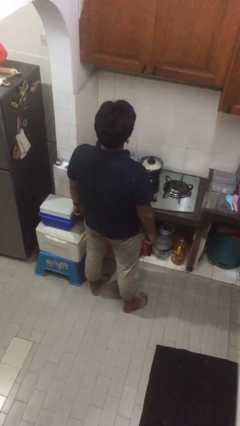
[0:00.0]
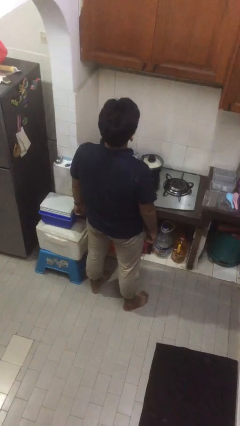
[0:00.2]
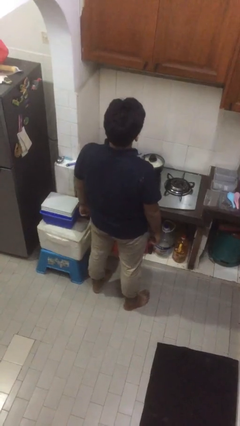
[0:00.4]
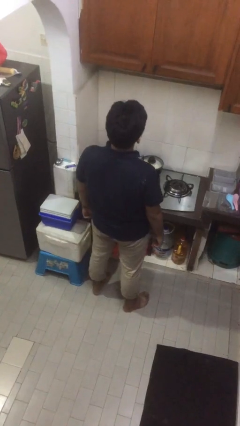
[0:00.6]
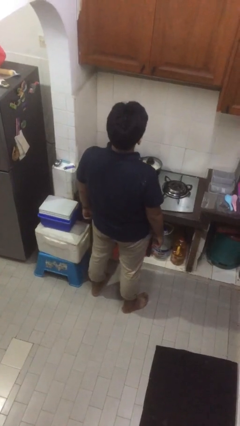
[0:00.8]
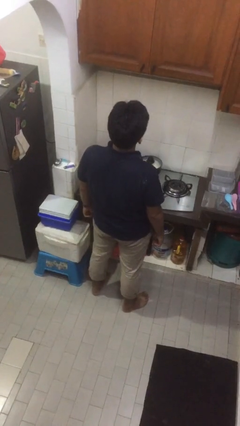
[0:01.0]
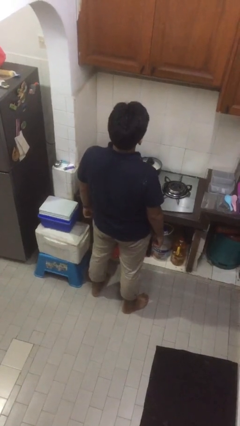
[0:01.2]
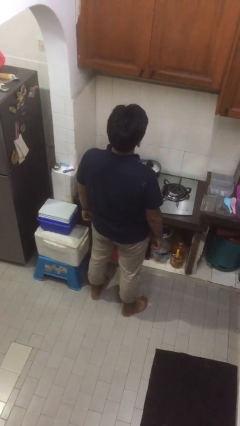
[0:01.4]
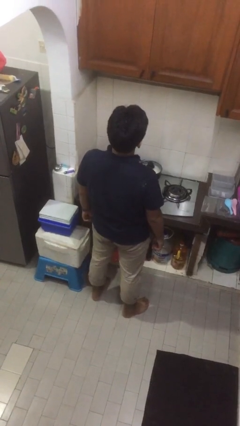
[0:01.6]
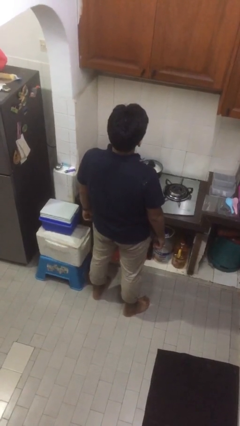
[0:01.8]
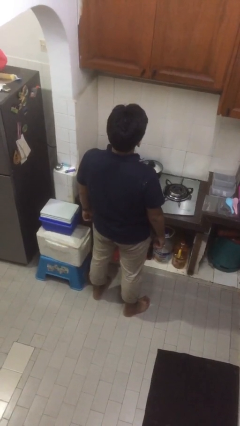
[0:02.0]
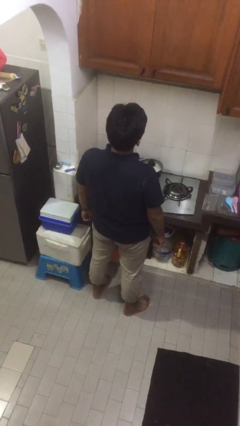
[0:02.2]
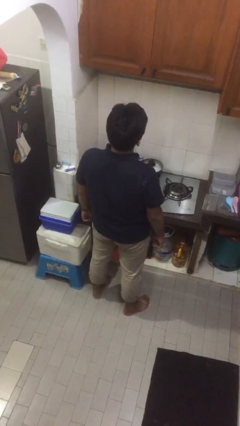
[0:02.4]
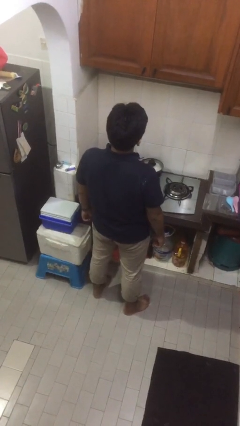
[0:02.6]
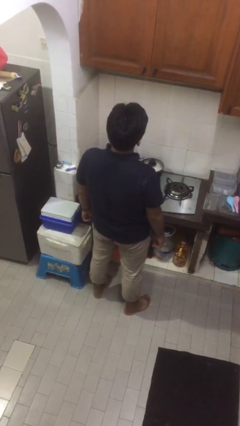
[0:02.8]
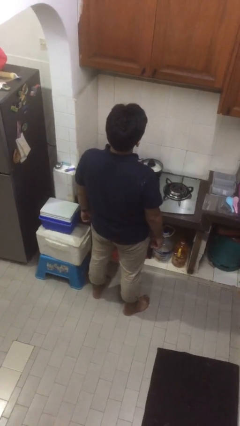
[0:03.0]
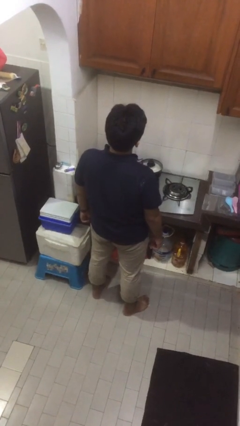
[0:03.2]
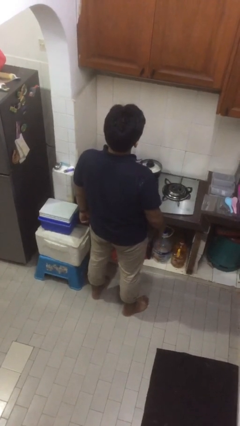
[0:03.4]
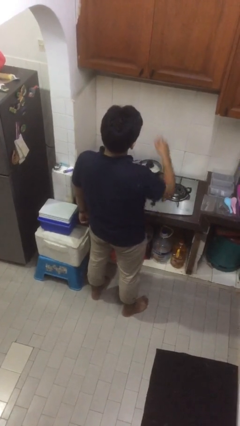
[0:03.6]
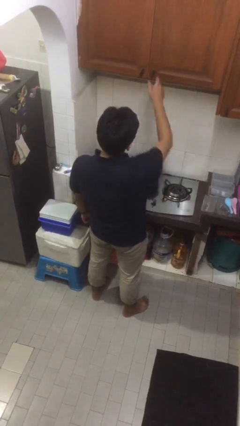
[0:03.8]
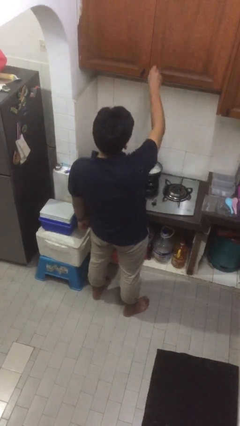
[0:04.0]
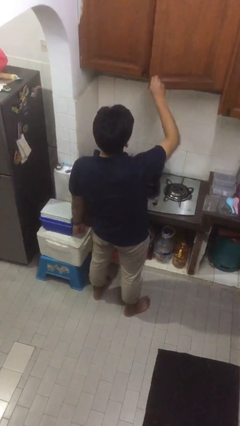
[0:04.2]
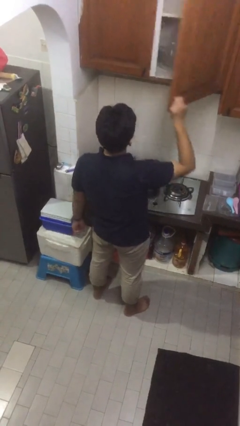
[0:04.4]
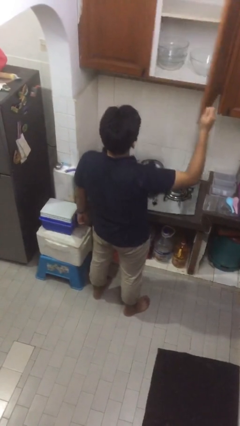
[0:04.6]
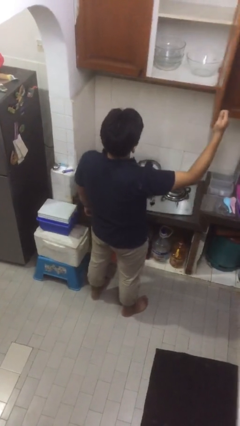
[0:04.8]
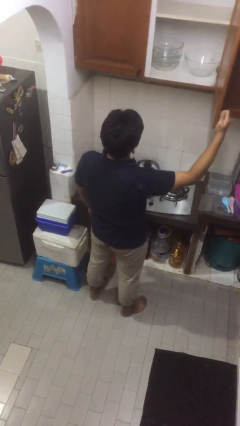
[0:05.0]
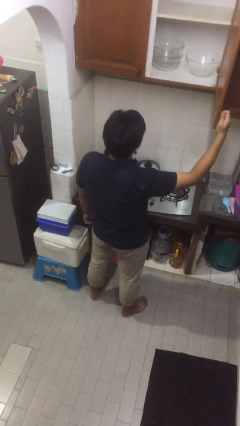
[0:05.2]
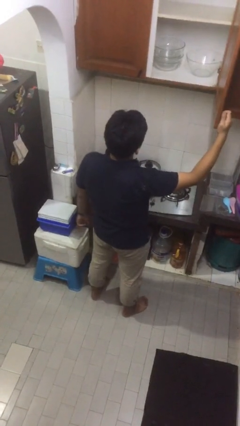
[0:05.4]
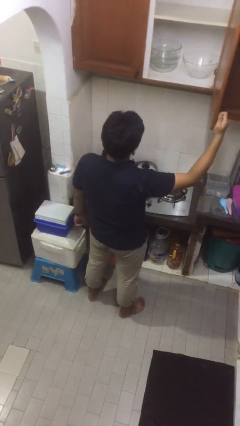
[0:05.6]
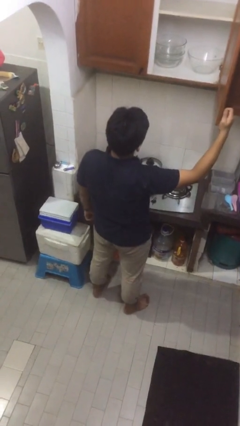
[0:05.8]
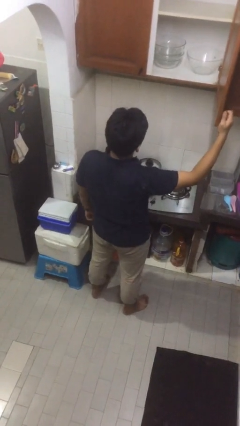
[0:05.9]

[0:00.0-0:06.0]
person opens cabinet

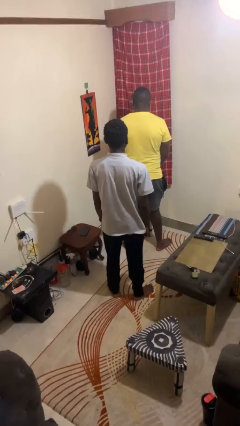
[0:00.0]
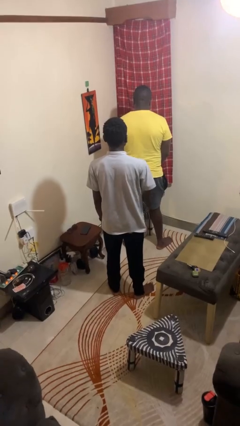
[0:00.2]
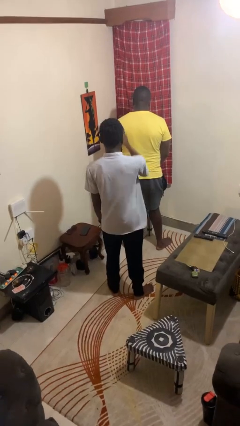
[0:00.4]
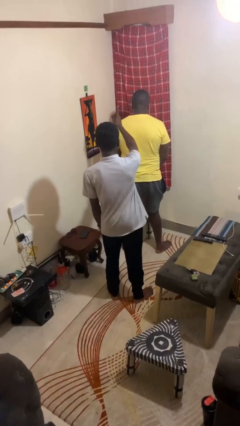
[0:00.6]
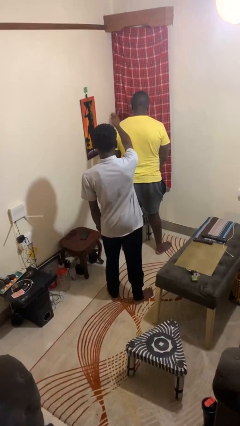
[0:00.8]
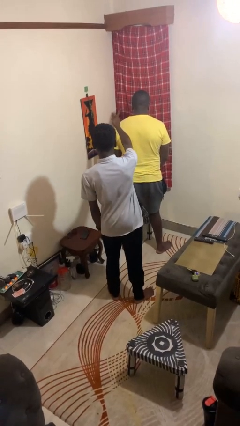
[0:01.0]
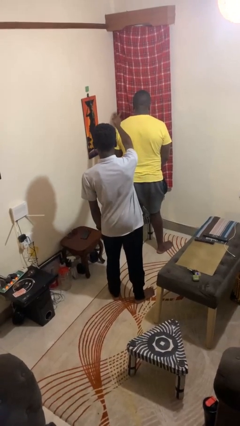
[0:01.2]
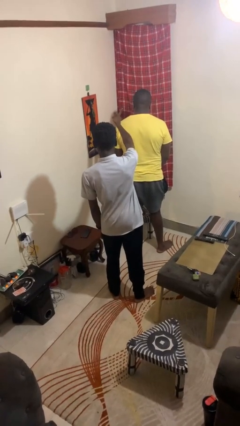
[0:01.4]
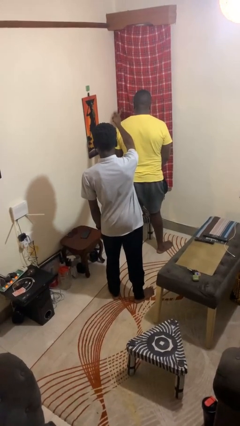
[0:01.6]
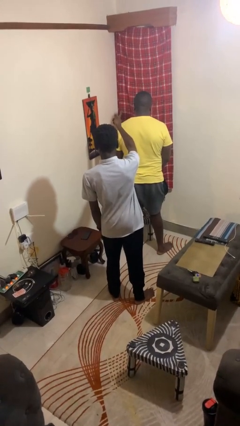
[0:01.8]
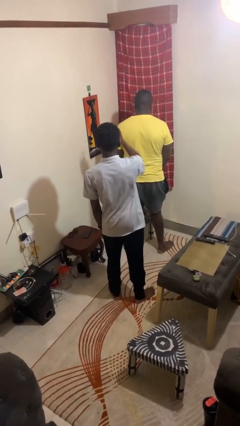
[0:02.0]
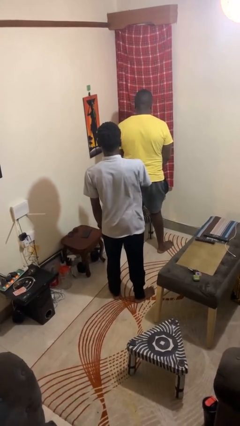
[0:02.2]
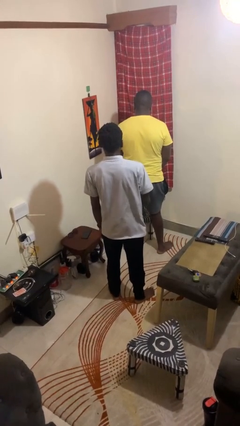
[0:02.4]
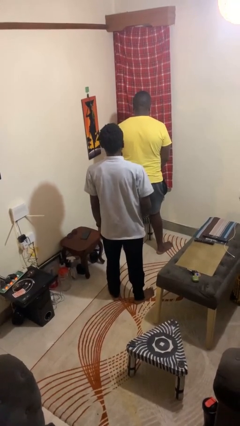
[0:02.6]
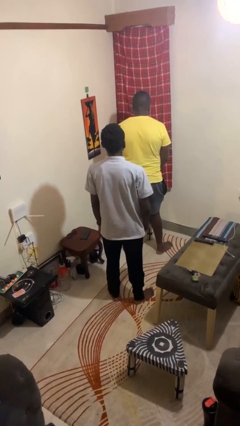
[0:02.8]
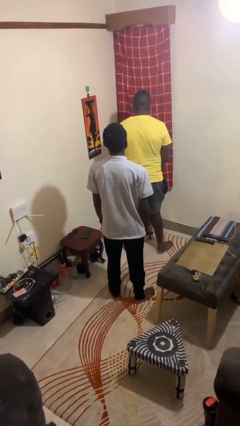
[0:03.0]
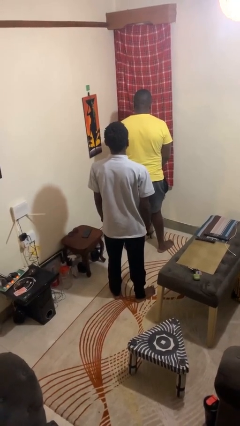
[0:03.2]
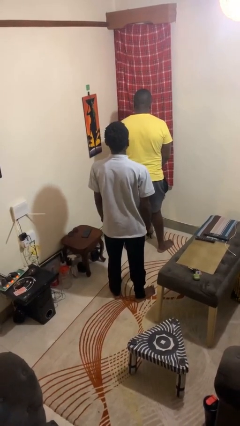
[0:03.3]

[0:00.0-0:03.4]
person points at person

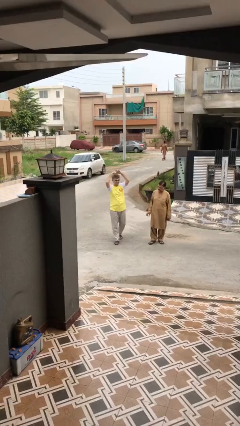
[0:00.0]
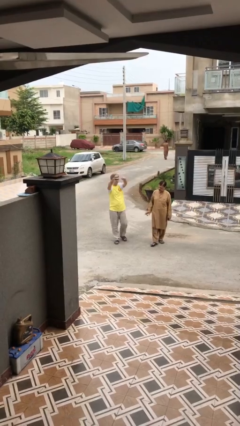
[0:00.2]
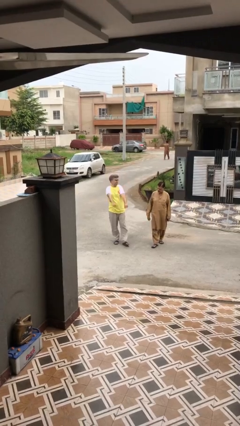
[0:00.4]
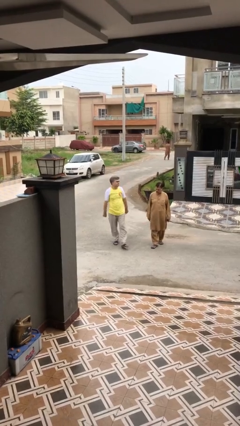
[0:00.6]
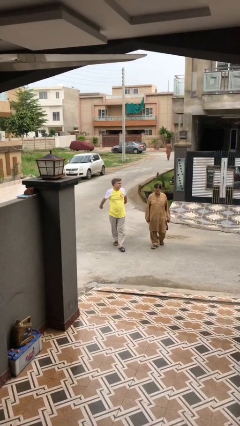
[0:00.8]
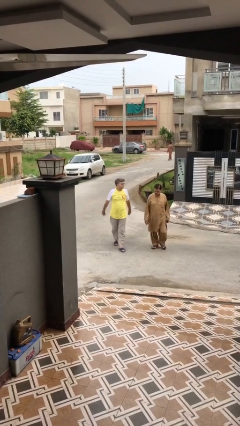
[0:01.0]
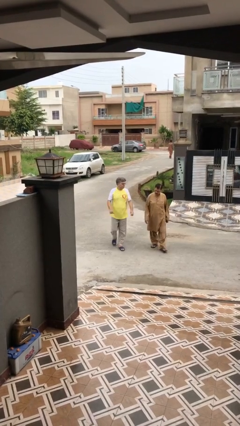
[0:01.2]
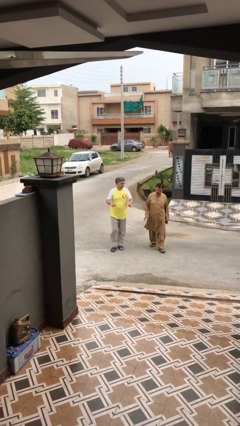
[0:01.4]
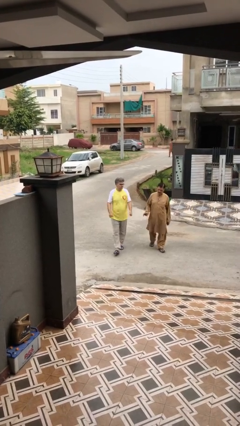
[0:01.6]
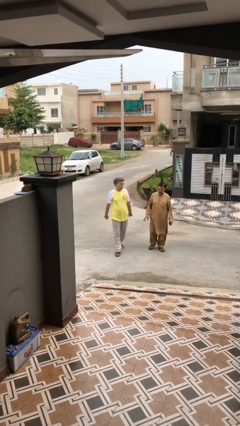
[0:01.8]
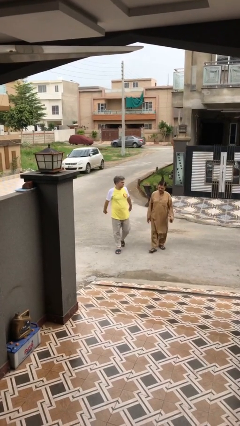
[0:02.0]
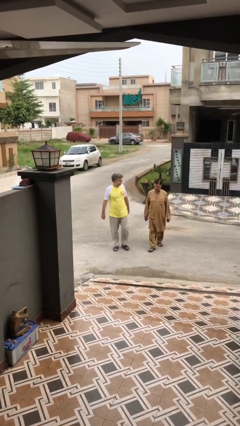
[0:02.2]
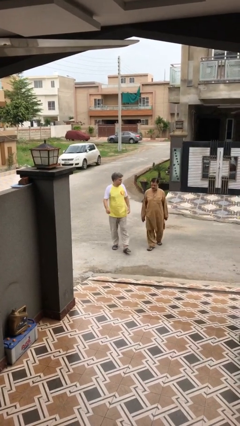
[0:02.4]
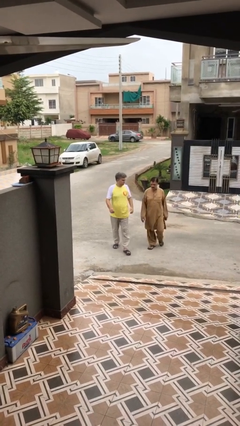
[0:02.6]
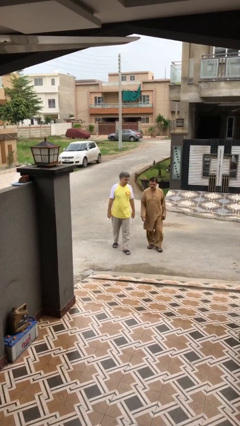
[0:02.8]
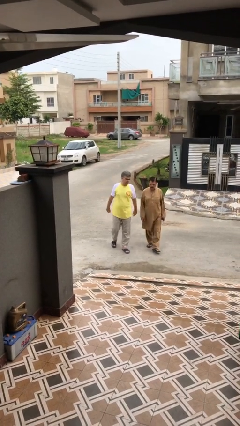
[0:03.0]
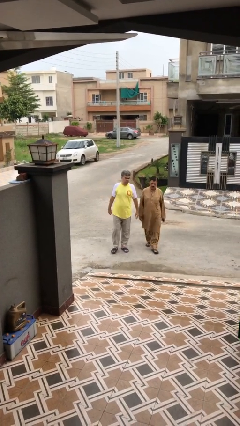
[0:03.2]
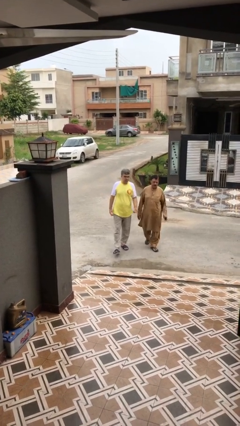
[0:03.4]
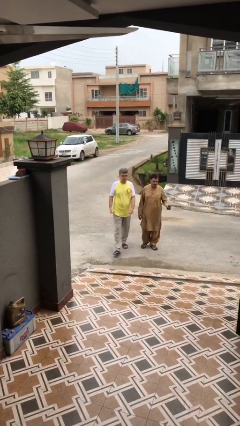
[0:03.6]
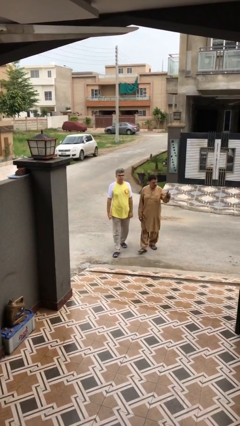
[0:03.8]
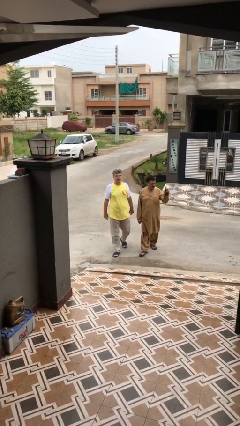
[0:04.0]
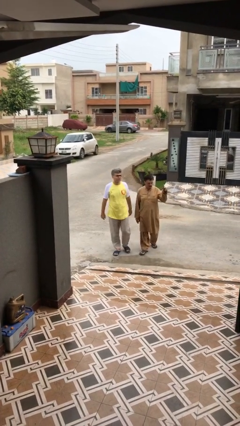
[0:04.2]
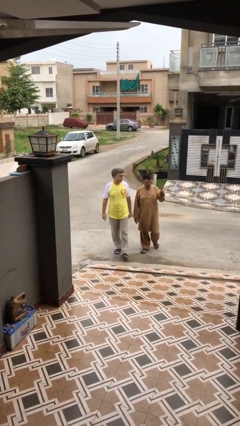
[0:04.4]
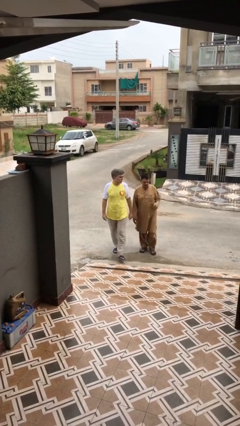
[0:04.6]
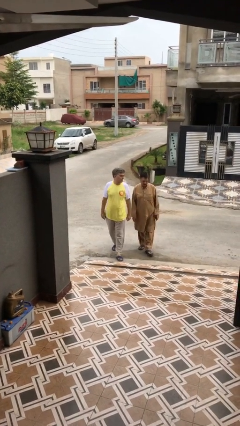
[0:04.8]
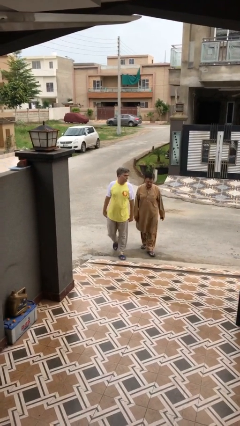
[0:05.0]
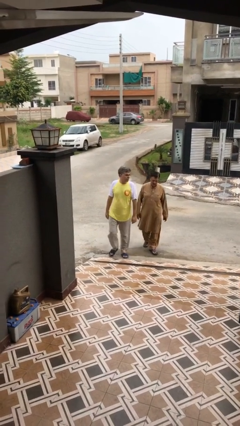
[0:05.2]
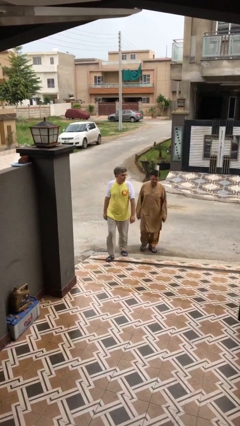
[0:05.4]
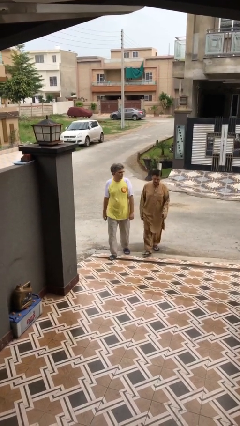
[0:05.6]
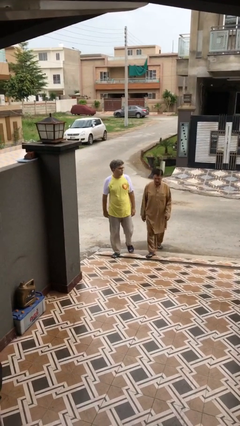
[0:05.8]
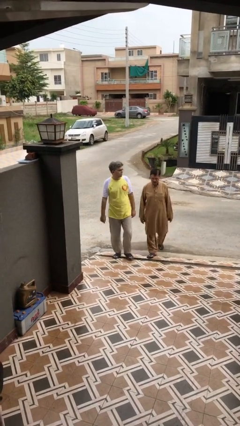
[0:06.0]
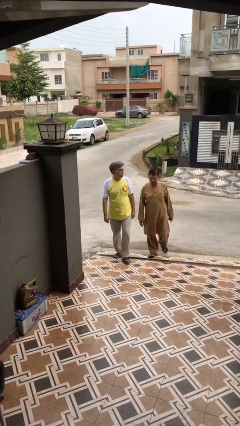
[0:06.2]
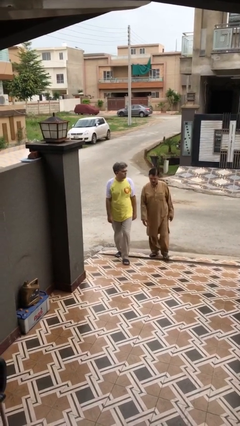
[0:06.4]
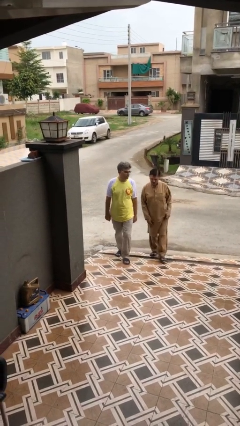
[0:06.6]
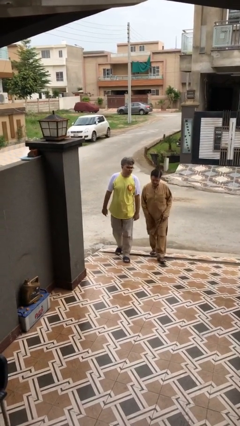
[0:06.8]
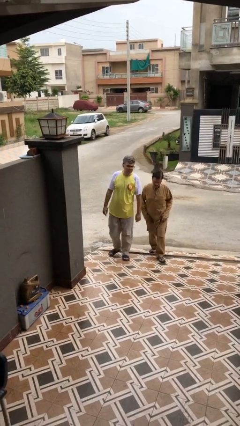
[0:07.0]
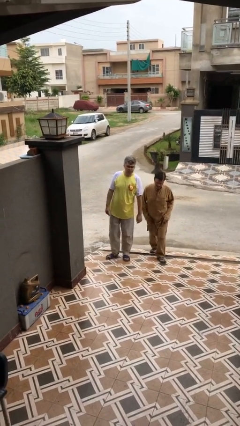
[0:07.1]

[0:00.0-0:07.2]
person talks to person

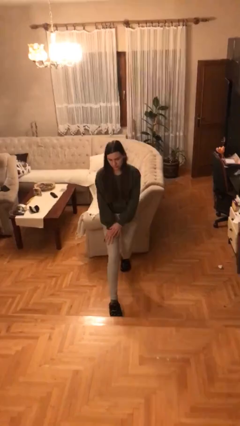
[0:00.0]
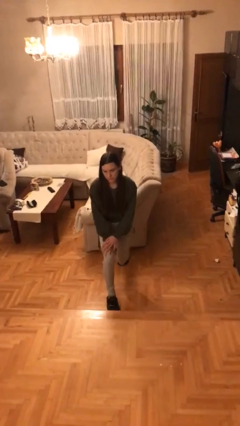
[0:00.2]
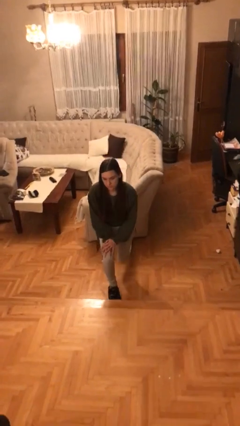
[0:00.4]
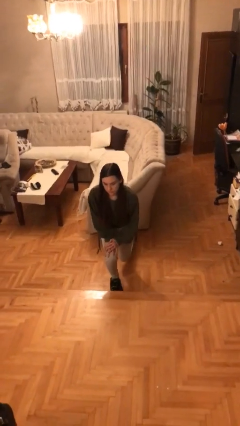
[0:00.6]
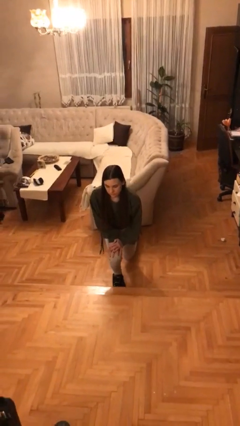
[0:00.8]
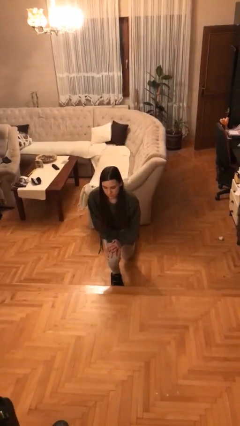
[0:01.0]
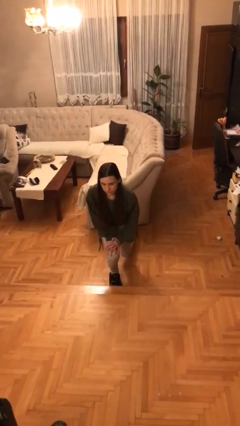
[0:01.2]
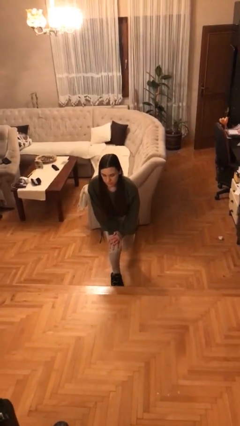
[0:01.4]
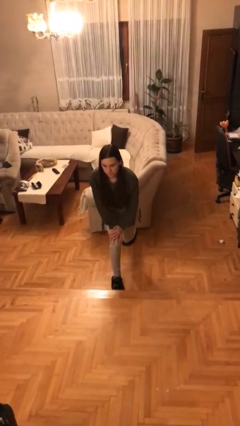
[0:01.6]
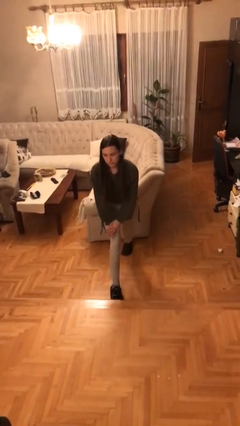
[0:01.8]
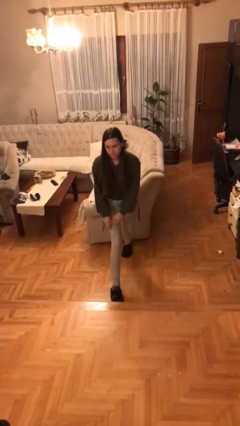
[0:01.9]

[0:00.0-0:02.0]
person kneels
